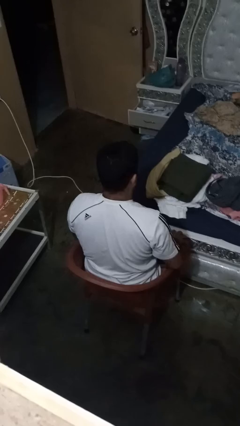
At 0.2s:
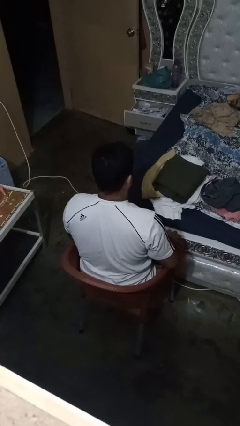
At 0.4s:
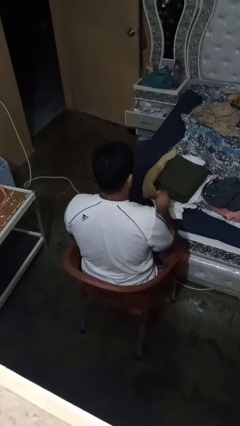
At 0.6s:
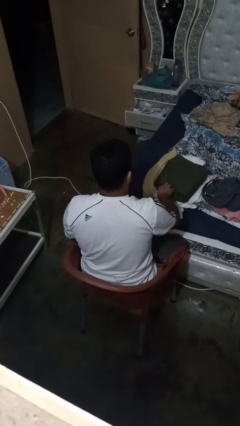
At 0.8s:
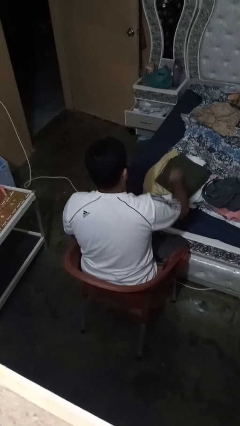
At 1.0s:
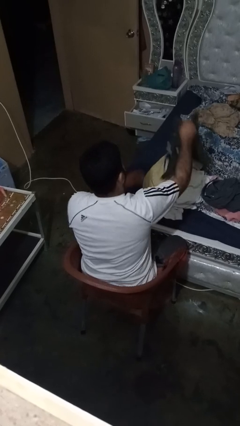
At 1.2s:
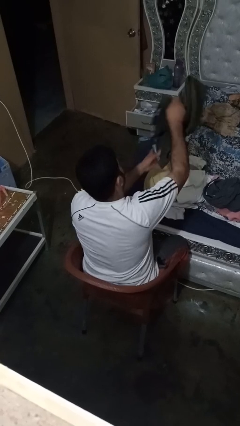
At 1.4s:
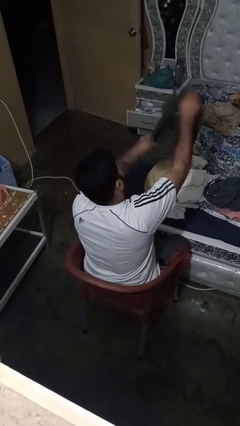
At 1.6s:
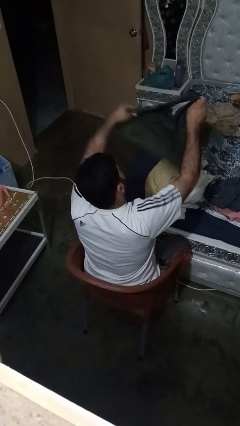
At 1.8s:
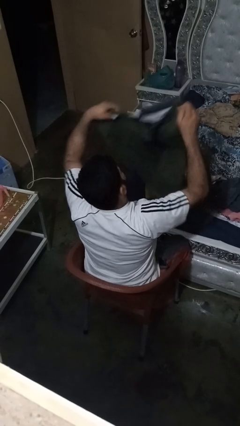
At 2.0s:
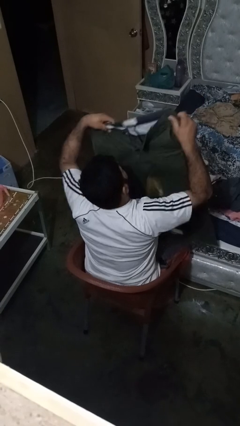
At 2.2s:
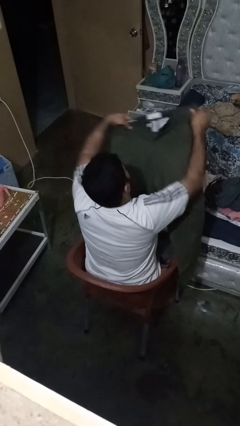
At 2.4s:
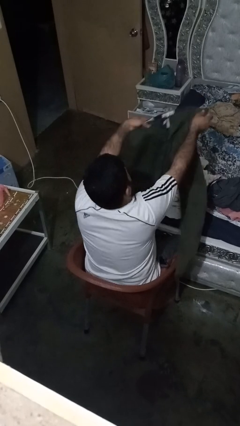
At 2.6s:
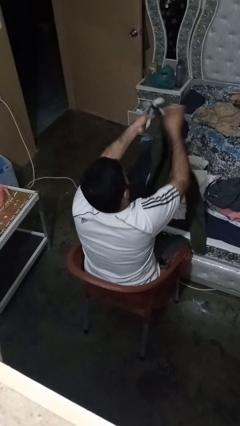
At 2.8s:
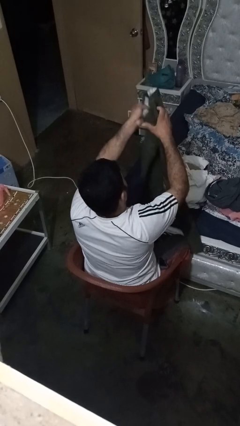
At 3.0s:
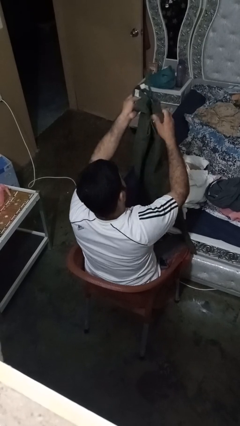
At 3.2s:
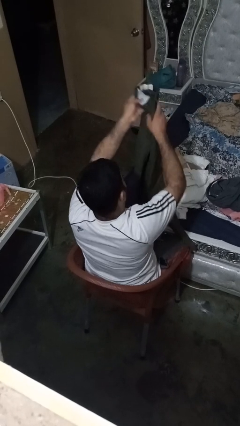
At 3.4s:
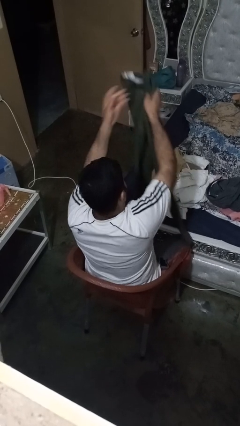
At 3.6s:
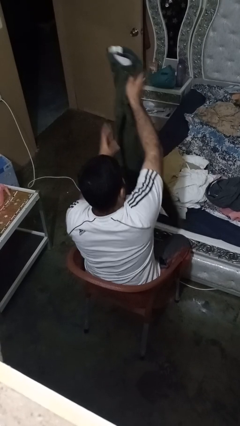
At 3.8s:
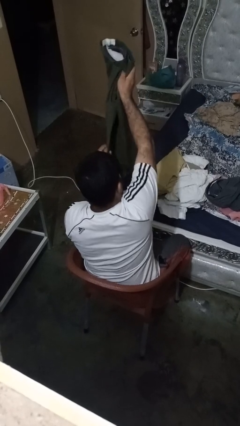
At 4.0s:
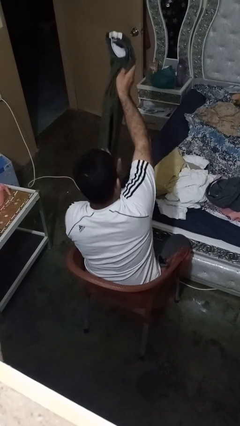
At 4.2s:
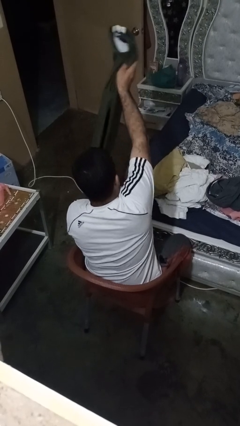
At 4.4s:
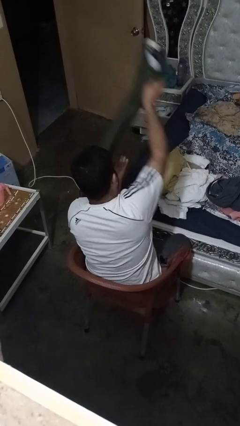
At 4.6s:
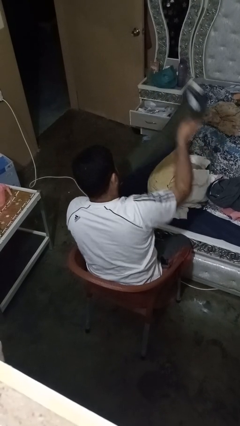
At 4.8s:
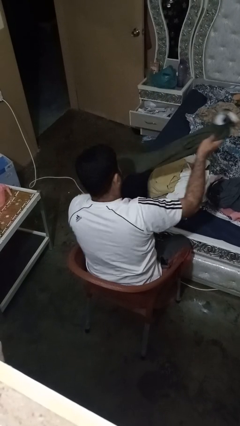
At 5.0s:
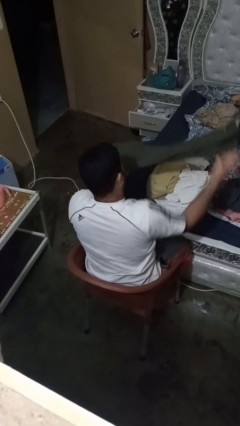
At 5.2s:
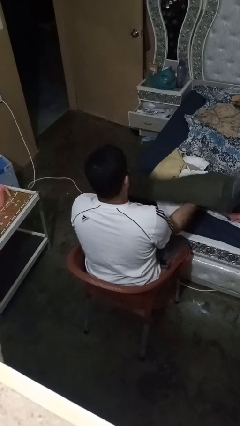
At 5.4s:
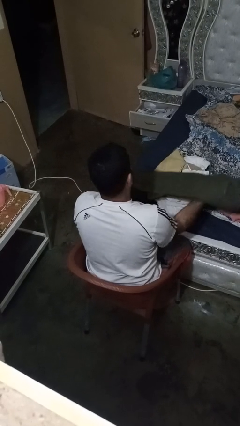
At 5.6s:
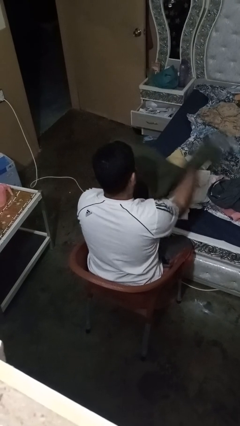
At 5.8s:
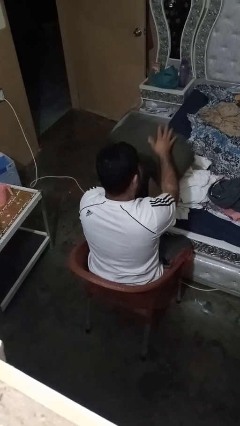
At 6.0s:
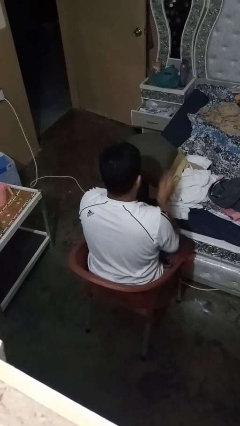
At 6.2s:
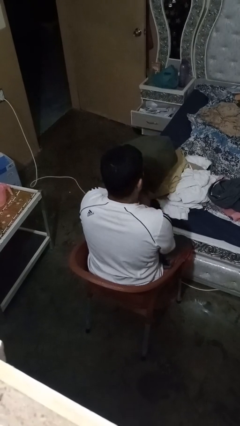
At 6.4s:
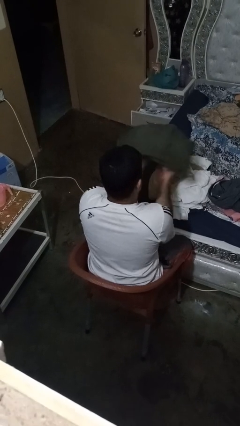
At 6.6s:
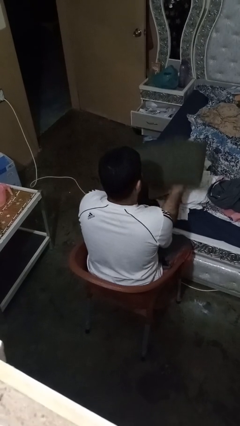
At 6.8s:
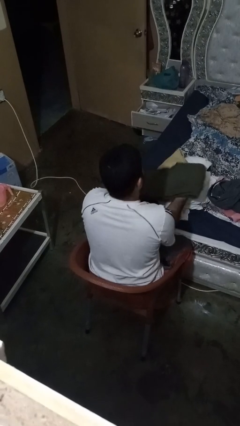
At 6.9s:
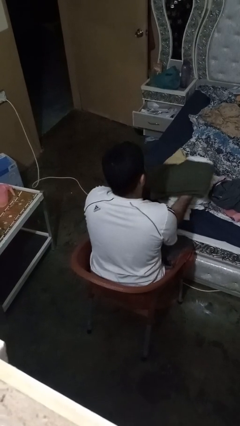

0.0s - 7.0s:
person folds pants

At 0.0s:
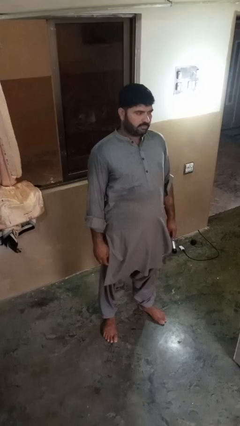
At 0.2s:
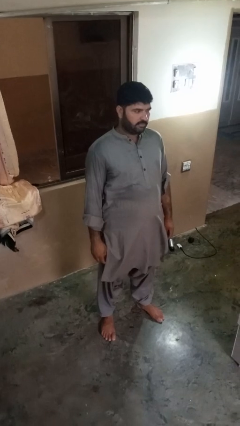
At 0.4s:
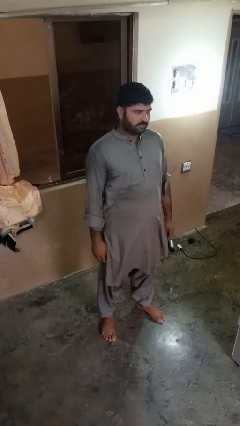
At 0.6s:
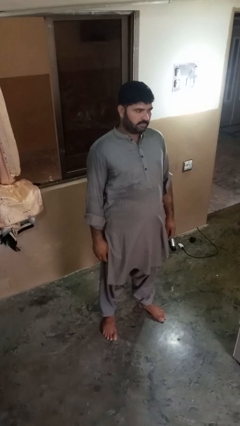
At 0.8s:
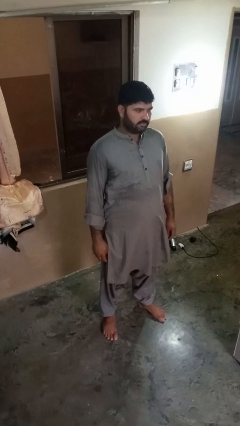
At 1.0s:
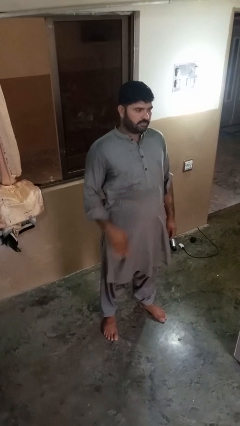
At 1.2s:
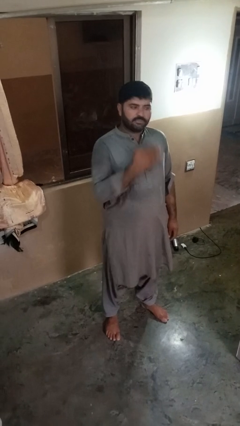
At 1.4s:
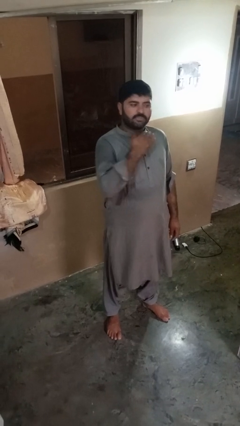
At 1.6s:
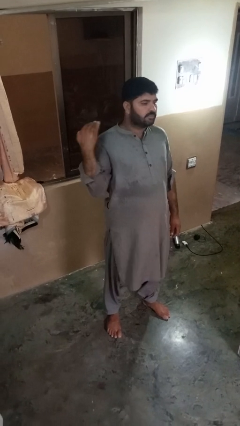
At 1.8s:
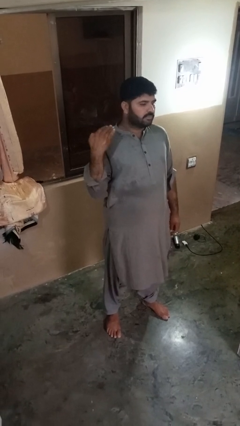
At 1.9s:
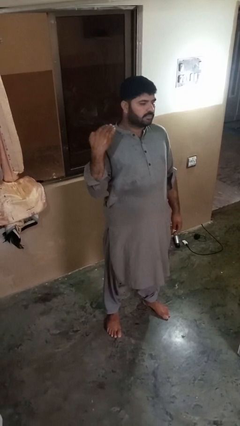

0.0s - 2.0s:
person gestures cut

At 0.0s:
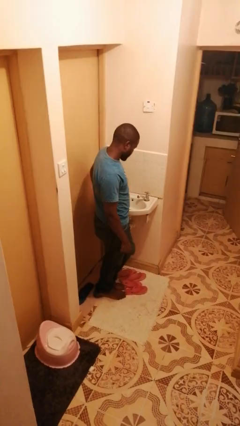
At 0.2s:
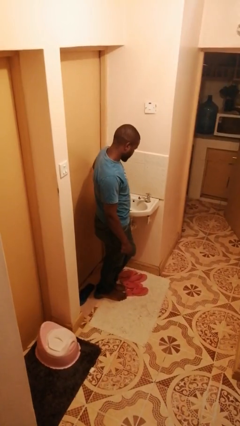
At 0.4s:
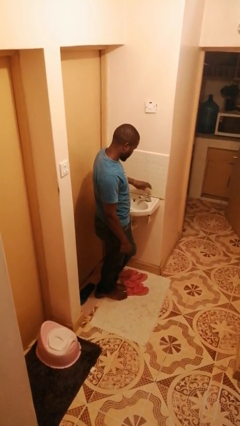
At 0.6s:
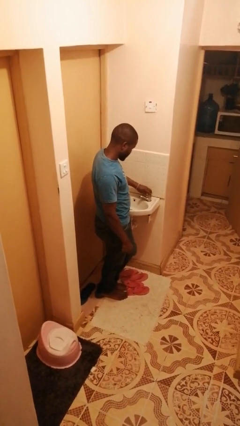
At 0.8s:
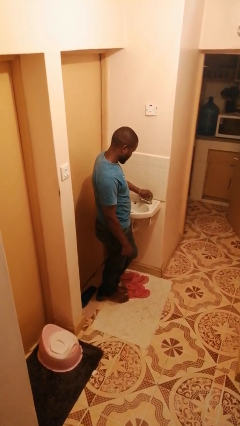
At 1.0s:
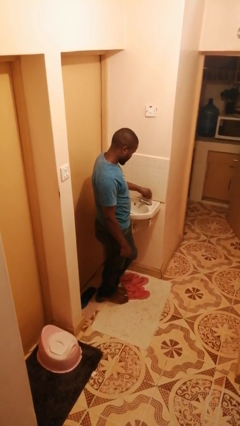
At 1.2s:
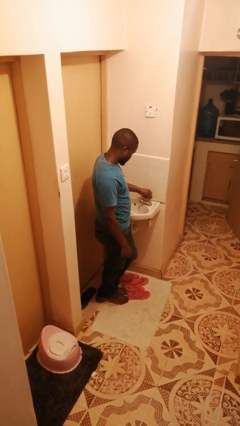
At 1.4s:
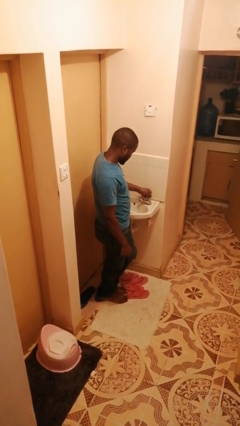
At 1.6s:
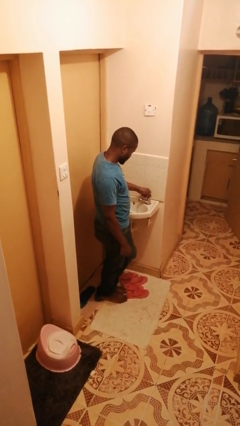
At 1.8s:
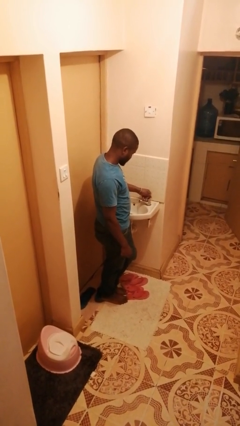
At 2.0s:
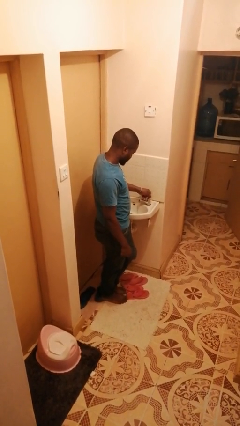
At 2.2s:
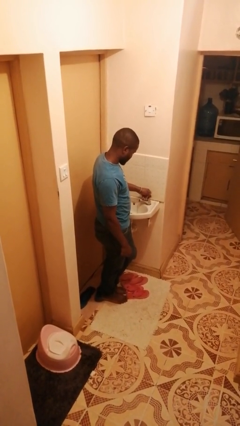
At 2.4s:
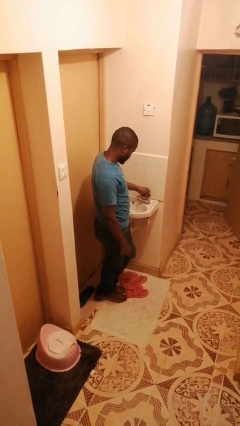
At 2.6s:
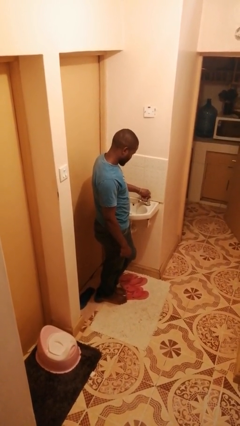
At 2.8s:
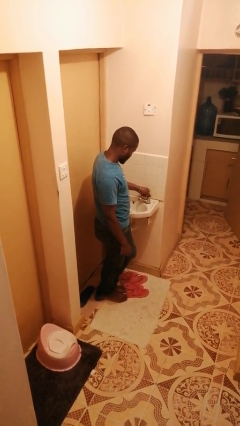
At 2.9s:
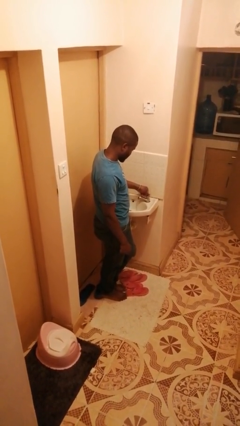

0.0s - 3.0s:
person turns on faucet

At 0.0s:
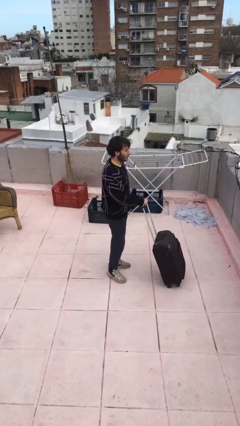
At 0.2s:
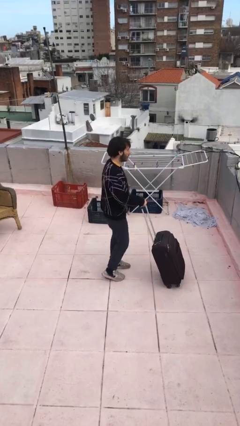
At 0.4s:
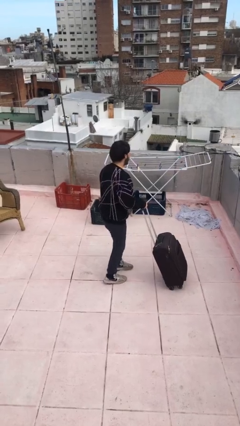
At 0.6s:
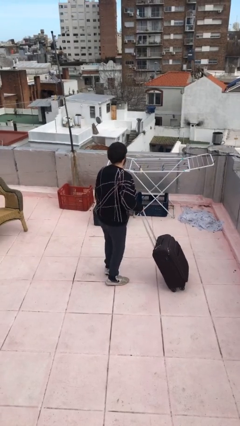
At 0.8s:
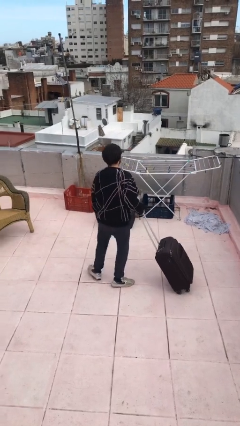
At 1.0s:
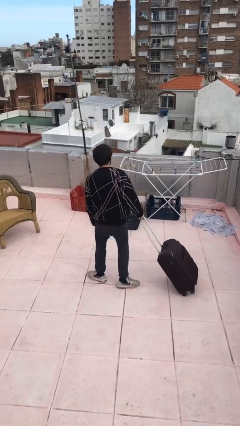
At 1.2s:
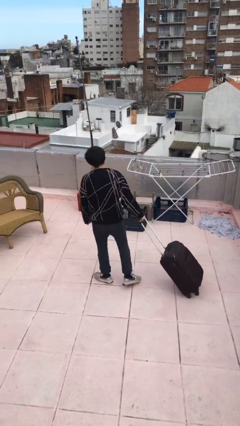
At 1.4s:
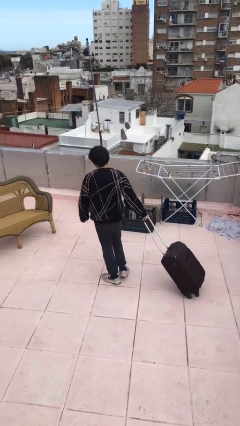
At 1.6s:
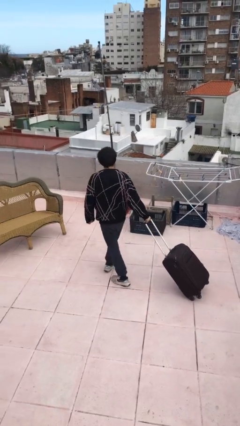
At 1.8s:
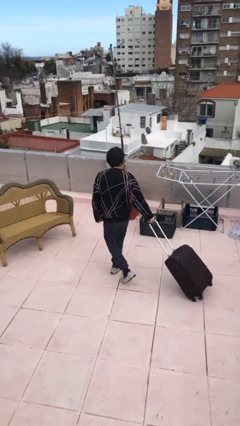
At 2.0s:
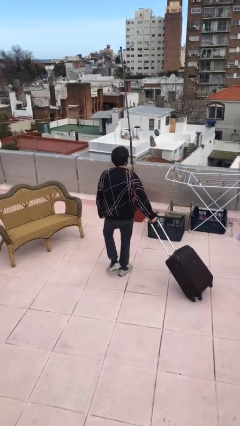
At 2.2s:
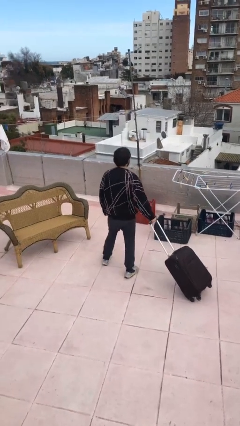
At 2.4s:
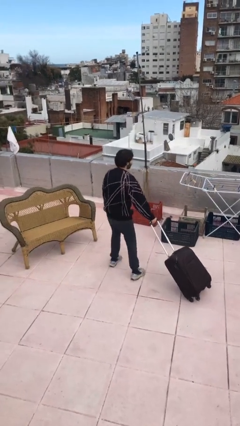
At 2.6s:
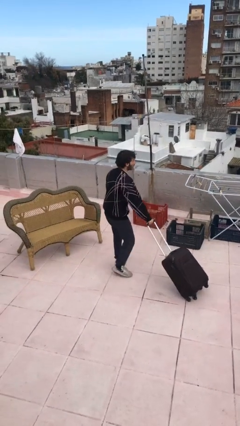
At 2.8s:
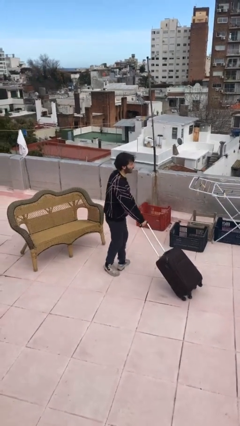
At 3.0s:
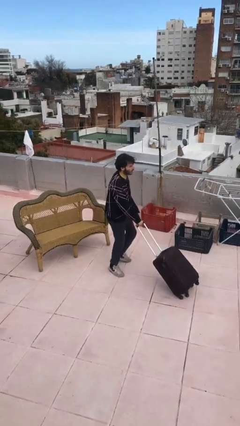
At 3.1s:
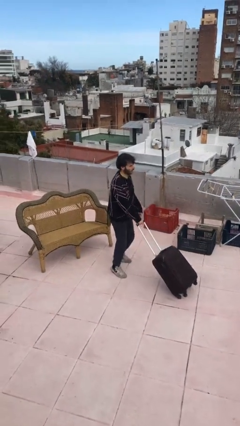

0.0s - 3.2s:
person pulls wheeled cart

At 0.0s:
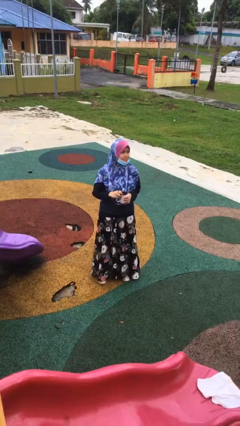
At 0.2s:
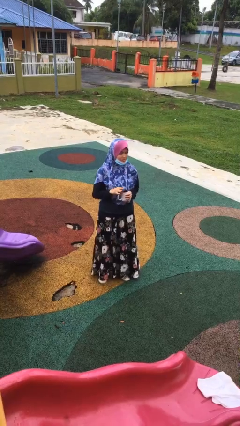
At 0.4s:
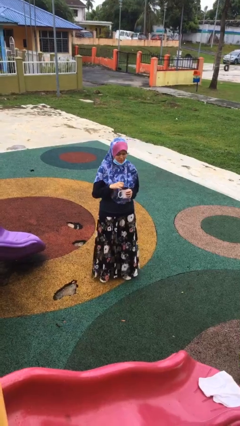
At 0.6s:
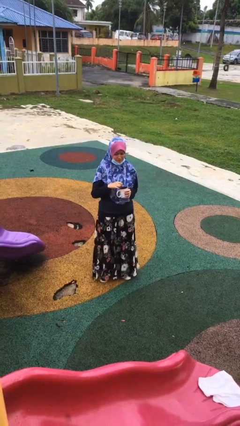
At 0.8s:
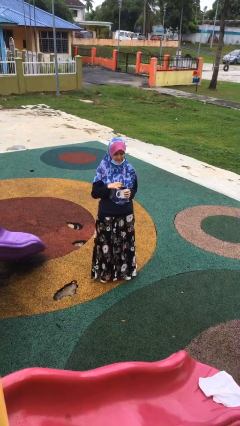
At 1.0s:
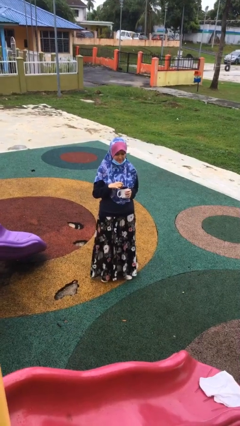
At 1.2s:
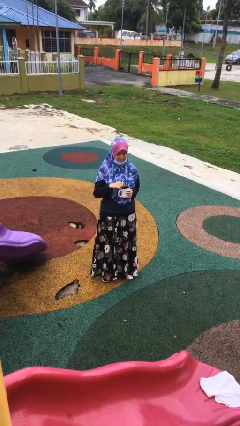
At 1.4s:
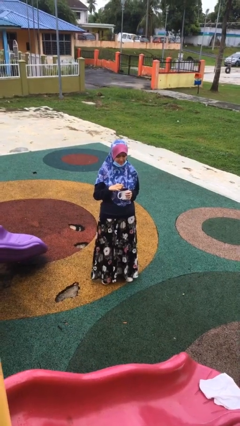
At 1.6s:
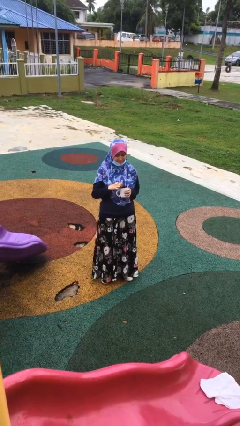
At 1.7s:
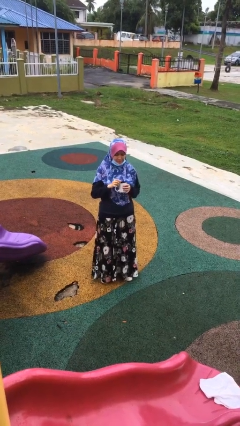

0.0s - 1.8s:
person stirs mug

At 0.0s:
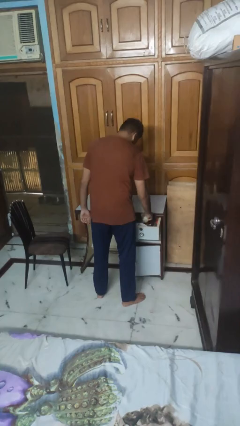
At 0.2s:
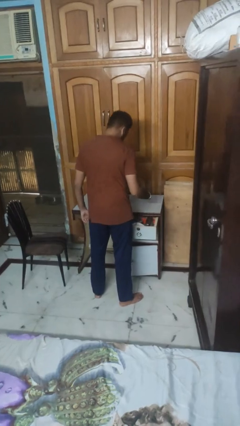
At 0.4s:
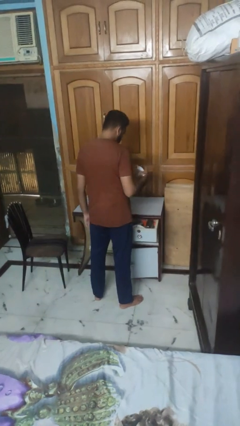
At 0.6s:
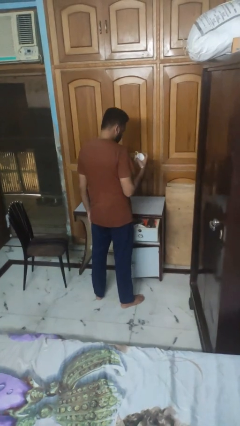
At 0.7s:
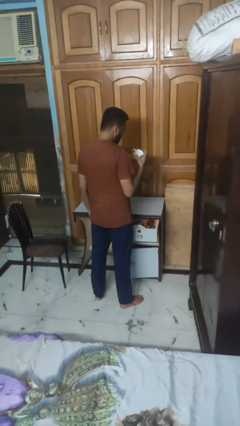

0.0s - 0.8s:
person takes object from kitchen drawer
